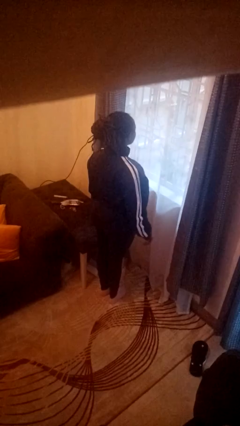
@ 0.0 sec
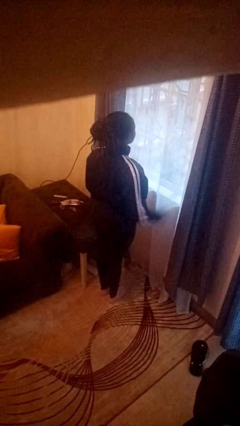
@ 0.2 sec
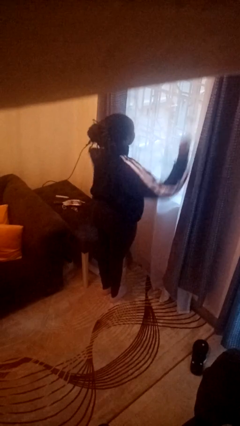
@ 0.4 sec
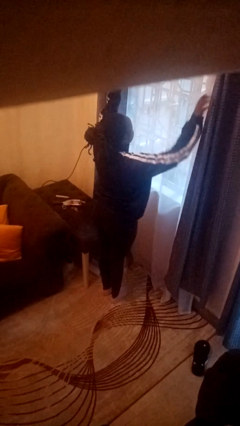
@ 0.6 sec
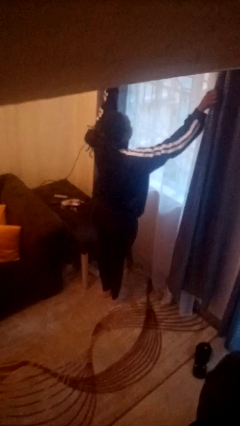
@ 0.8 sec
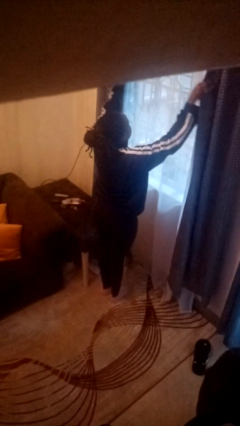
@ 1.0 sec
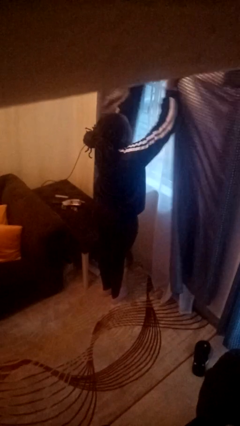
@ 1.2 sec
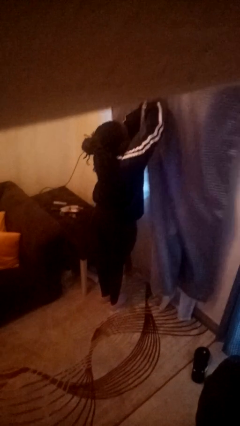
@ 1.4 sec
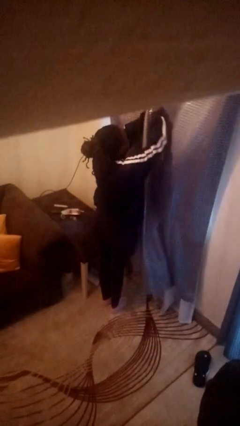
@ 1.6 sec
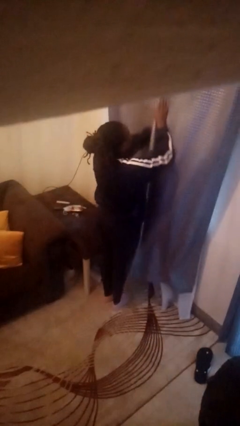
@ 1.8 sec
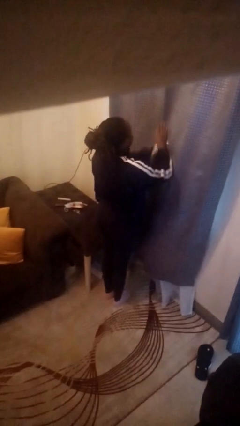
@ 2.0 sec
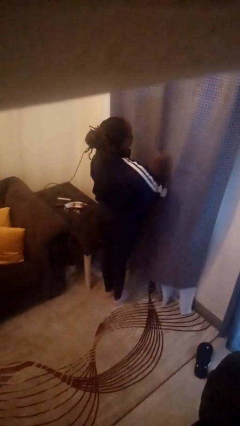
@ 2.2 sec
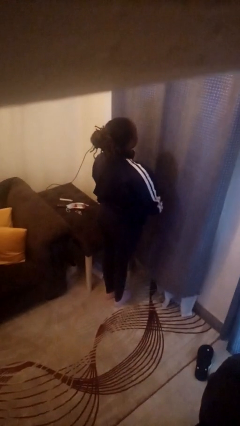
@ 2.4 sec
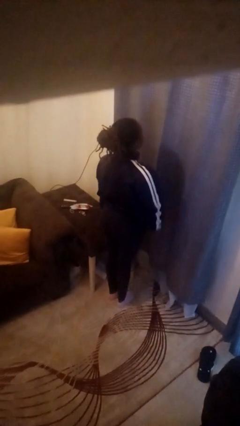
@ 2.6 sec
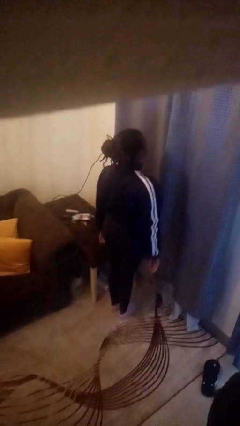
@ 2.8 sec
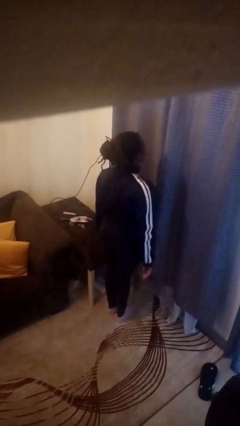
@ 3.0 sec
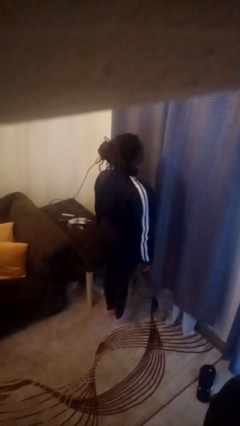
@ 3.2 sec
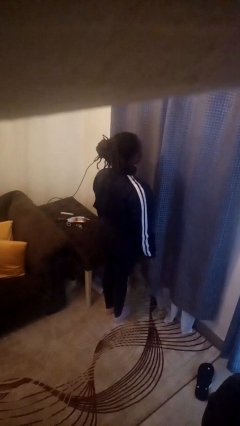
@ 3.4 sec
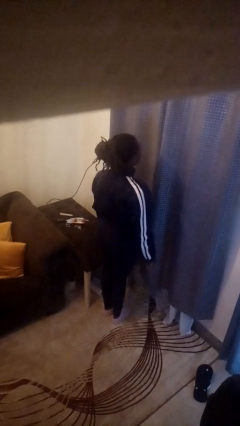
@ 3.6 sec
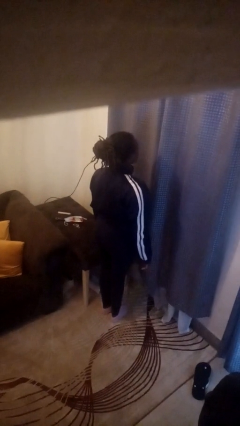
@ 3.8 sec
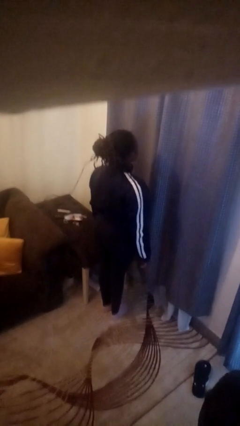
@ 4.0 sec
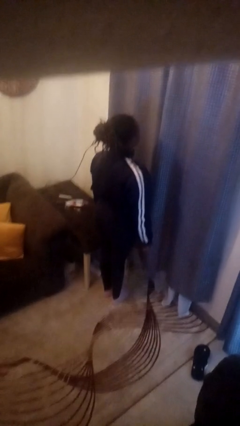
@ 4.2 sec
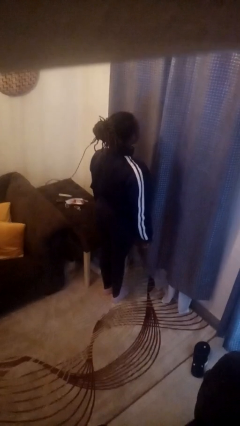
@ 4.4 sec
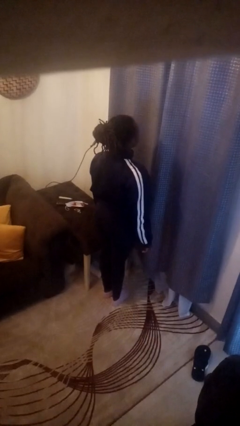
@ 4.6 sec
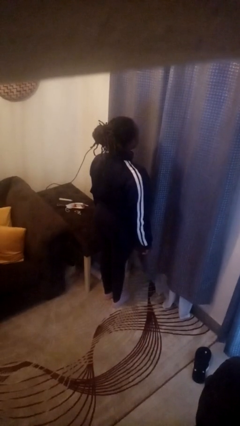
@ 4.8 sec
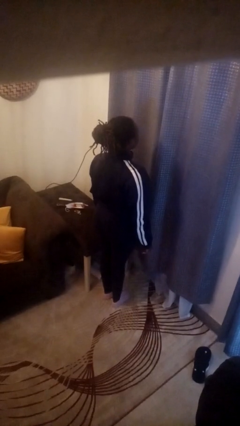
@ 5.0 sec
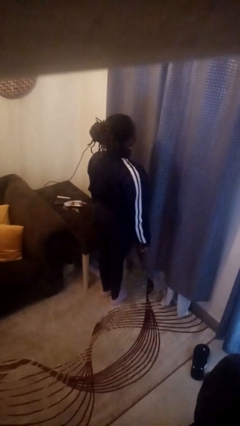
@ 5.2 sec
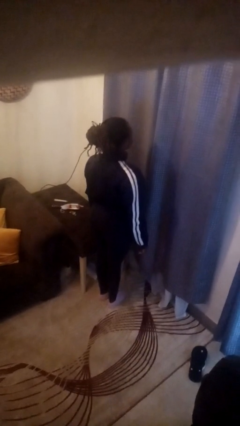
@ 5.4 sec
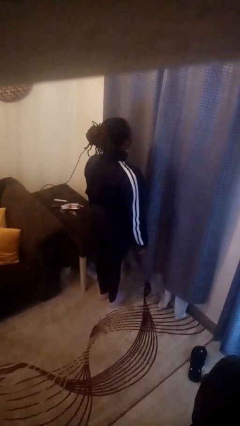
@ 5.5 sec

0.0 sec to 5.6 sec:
person closes curtains

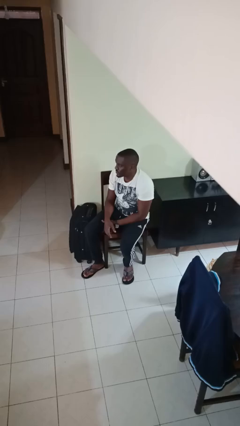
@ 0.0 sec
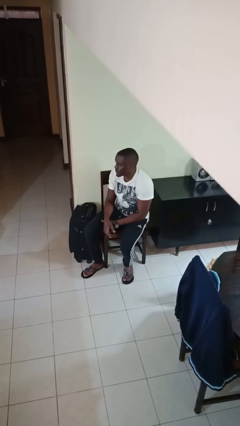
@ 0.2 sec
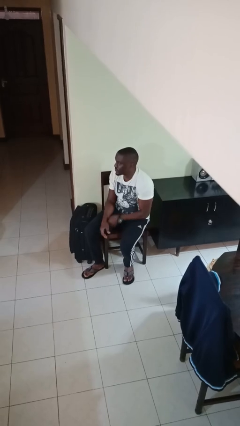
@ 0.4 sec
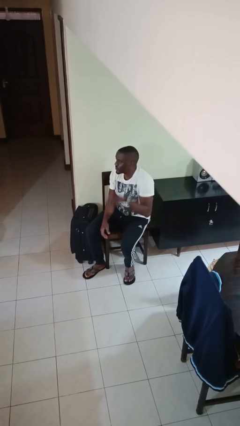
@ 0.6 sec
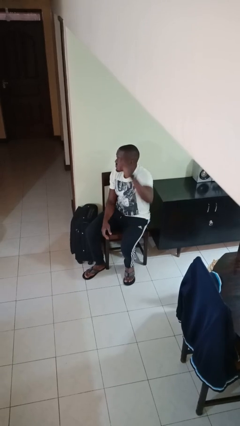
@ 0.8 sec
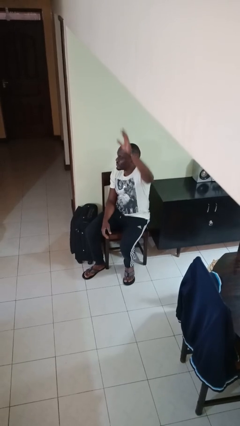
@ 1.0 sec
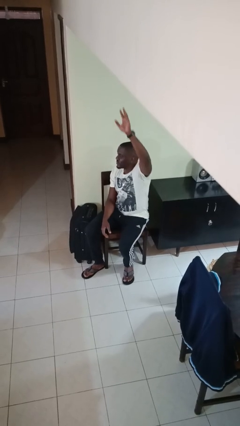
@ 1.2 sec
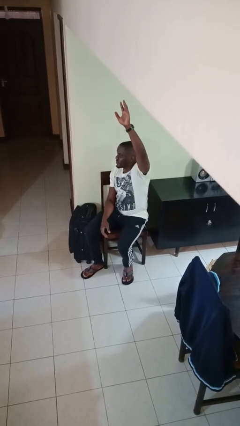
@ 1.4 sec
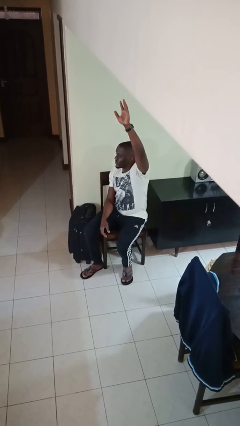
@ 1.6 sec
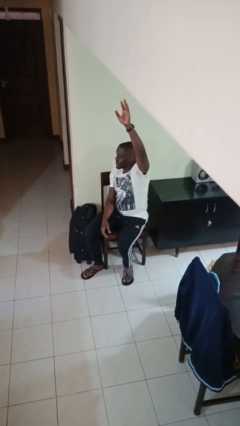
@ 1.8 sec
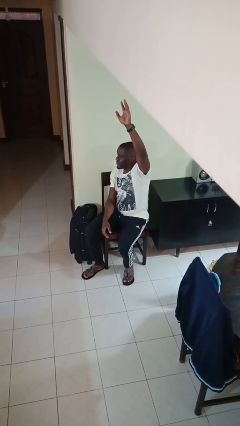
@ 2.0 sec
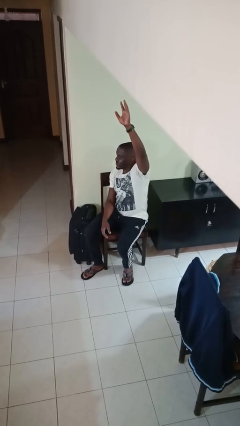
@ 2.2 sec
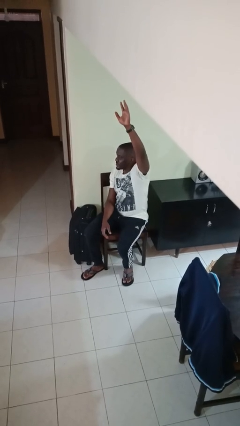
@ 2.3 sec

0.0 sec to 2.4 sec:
person gestures raise hand

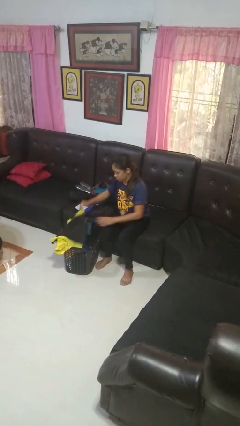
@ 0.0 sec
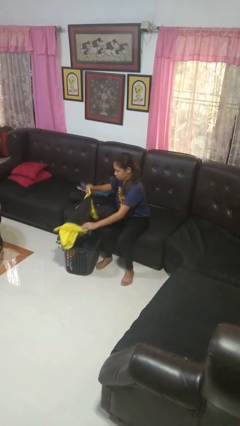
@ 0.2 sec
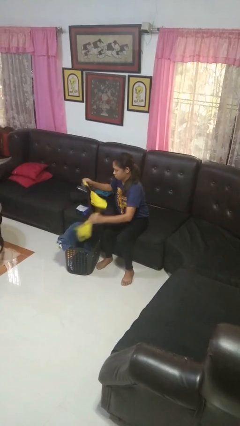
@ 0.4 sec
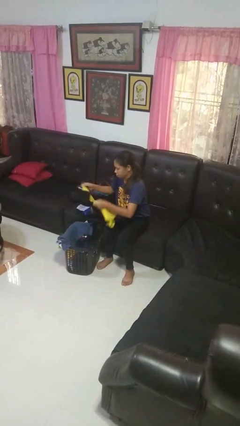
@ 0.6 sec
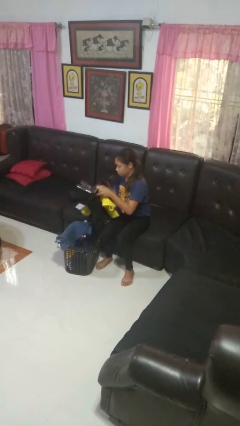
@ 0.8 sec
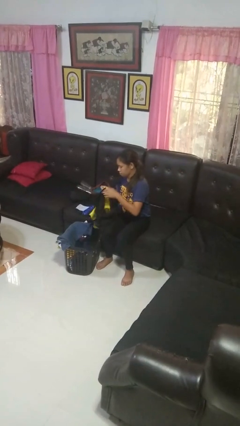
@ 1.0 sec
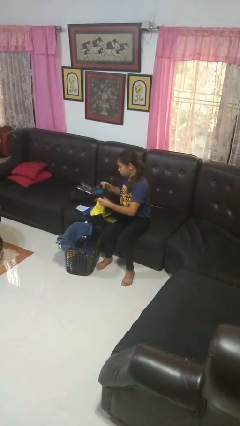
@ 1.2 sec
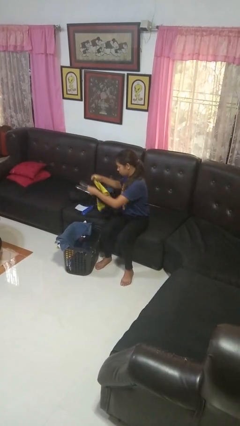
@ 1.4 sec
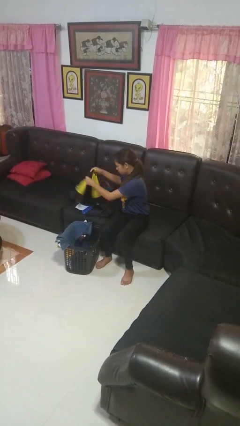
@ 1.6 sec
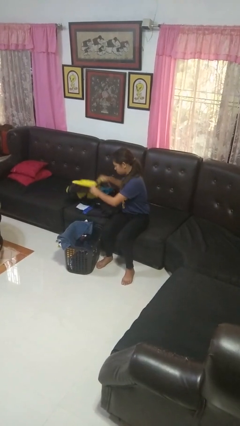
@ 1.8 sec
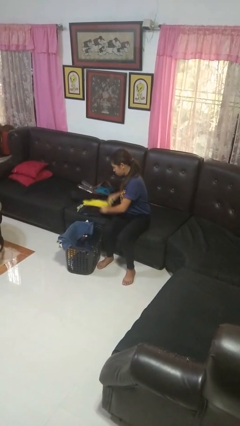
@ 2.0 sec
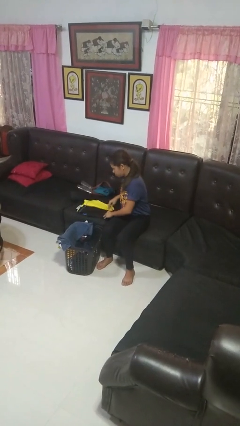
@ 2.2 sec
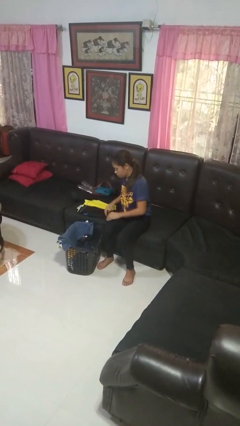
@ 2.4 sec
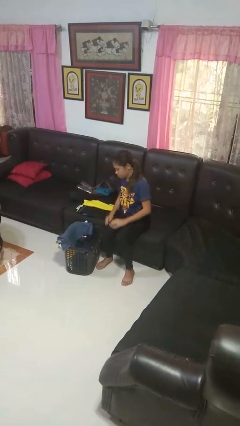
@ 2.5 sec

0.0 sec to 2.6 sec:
person folds shirt

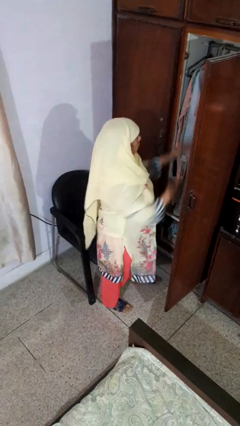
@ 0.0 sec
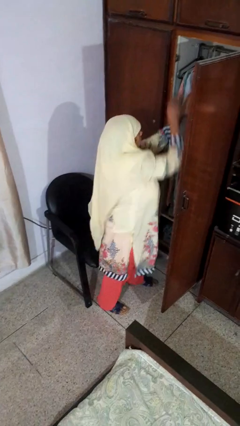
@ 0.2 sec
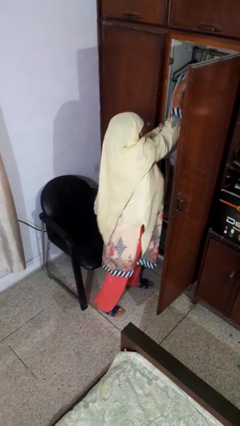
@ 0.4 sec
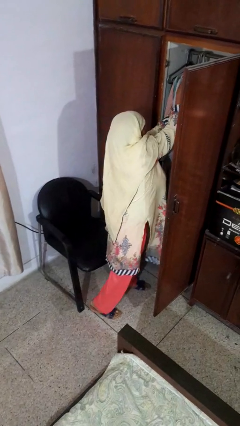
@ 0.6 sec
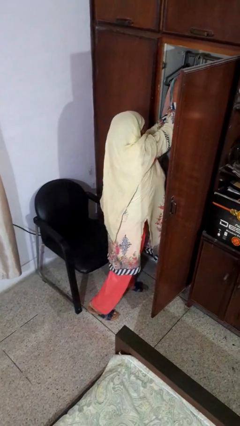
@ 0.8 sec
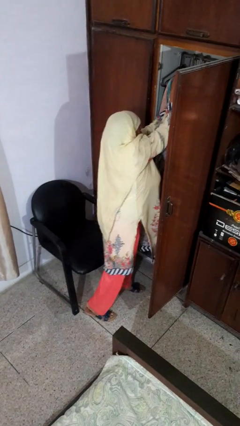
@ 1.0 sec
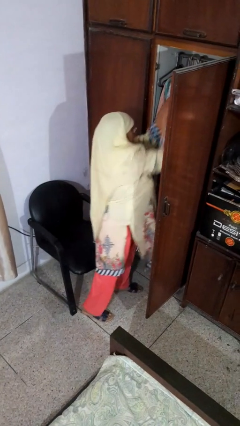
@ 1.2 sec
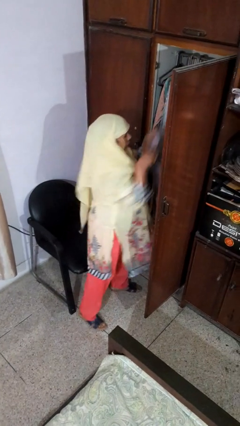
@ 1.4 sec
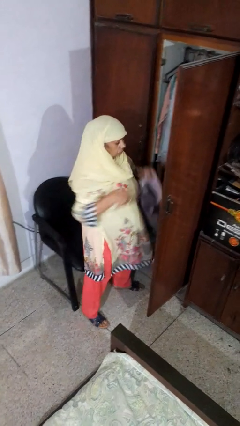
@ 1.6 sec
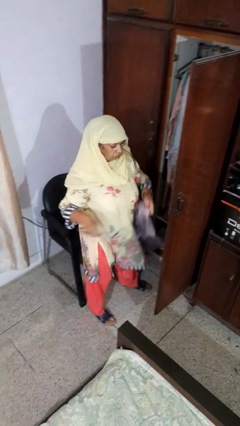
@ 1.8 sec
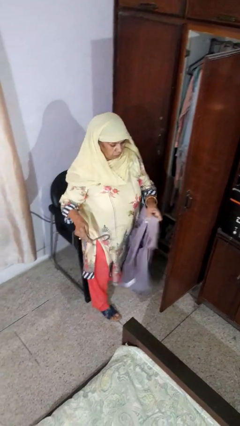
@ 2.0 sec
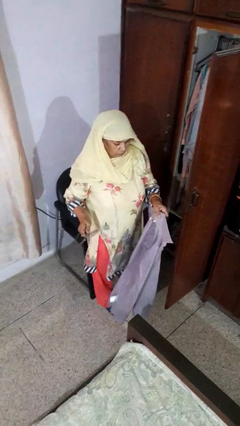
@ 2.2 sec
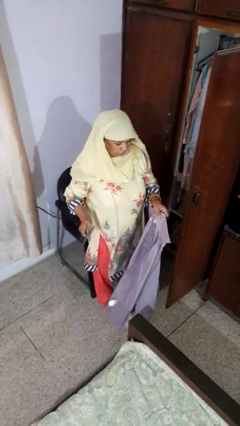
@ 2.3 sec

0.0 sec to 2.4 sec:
person takes clothes from closet

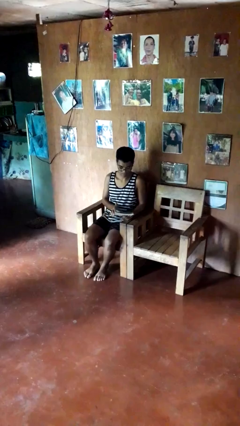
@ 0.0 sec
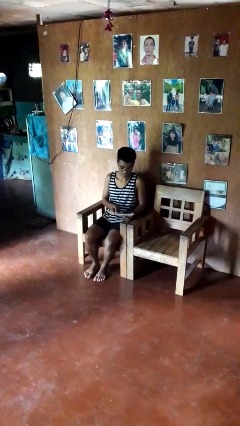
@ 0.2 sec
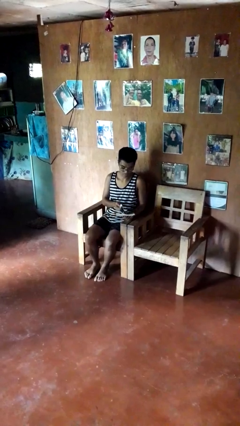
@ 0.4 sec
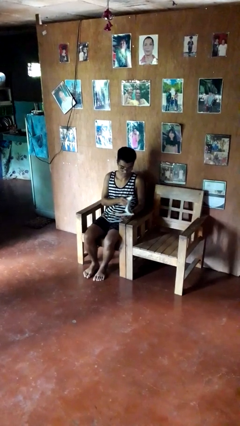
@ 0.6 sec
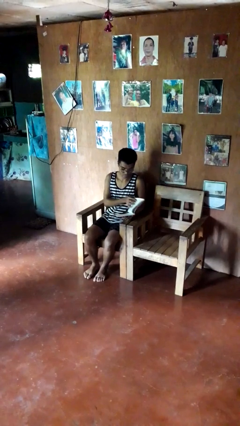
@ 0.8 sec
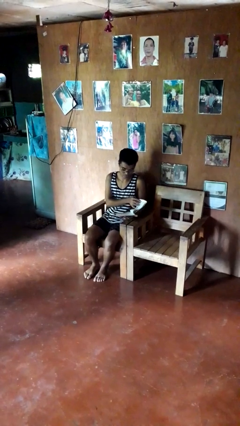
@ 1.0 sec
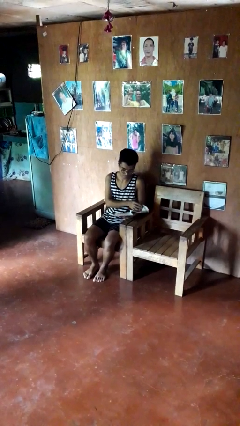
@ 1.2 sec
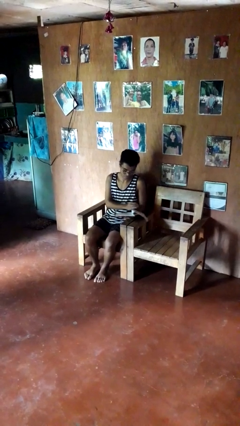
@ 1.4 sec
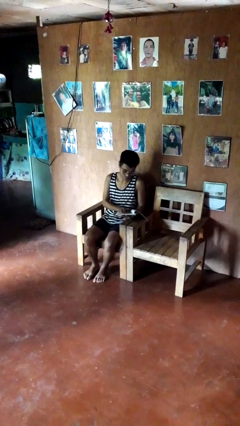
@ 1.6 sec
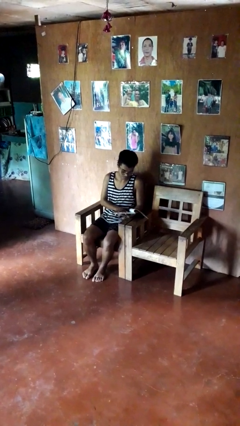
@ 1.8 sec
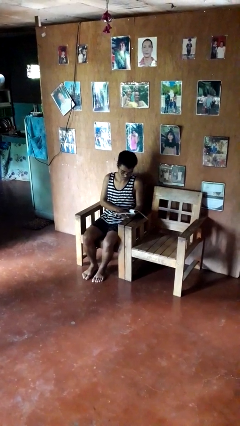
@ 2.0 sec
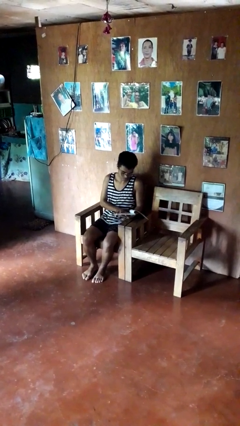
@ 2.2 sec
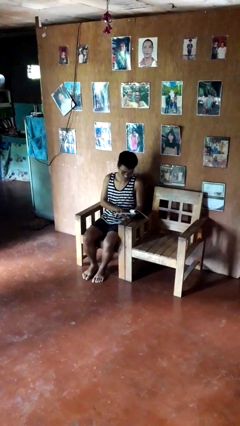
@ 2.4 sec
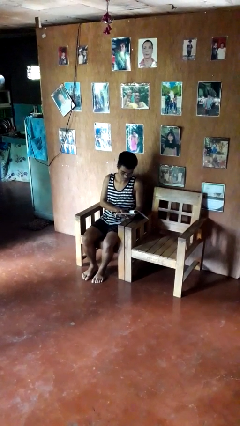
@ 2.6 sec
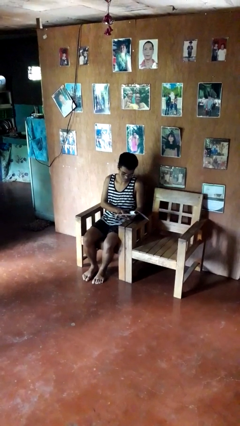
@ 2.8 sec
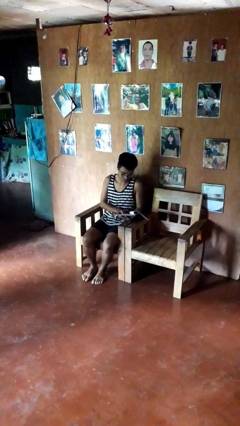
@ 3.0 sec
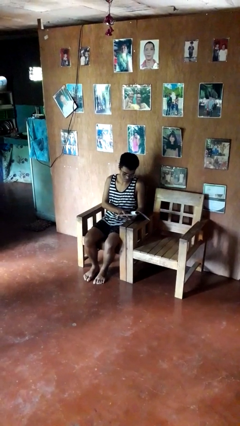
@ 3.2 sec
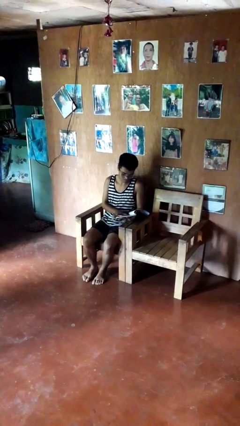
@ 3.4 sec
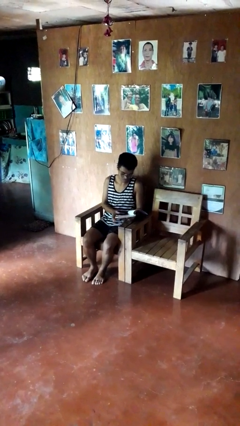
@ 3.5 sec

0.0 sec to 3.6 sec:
person reads book

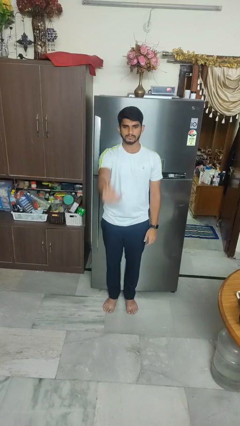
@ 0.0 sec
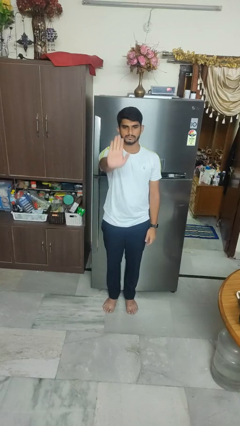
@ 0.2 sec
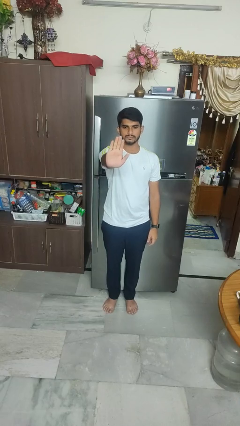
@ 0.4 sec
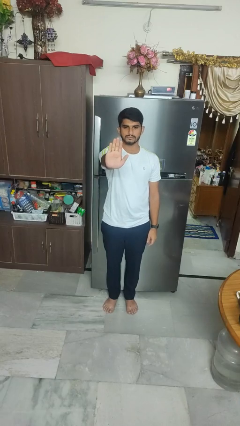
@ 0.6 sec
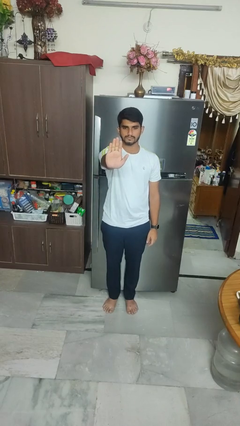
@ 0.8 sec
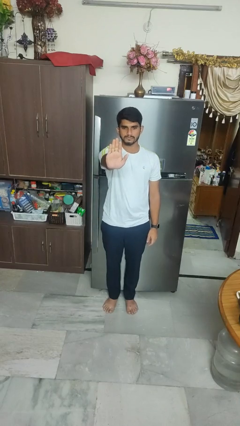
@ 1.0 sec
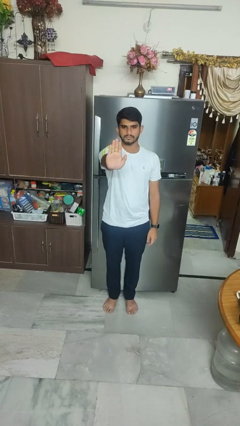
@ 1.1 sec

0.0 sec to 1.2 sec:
person gestures stop
